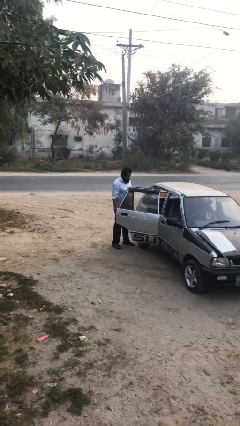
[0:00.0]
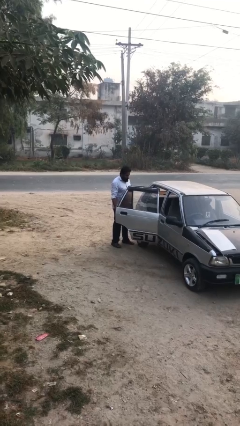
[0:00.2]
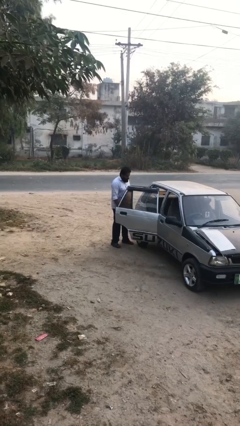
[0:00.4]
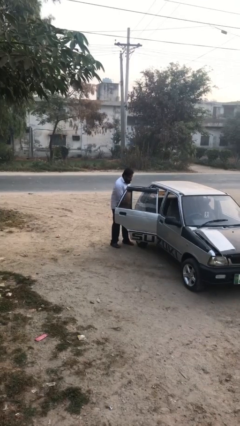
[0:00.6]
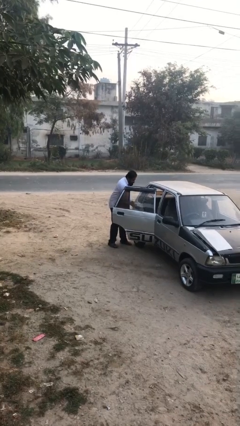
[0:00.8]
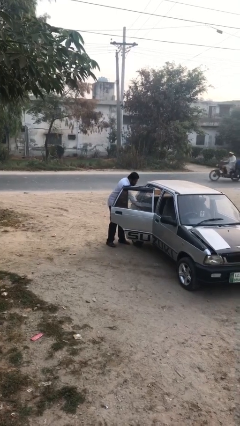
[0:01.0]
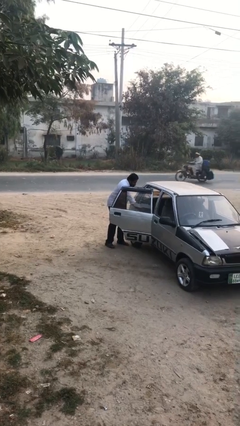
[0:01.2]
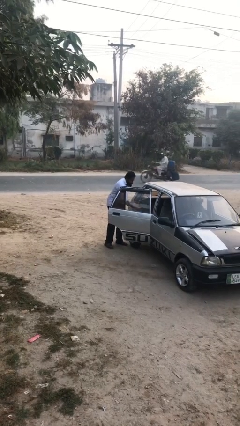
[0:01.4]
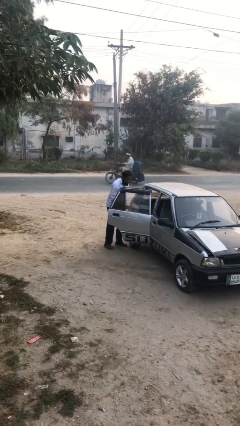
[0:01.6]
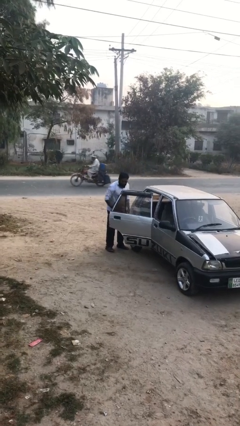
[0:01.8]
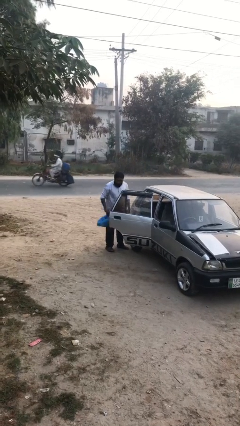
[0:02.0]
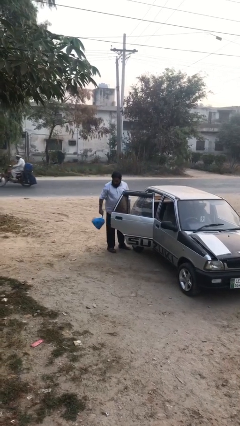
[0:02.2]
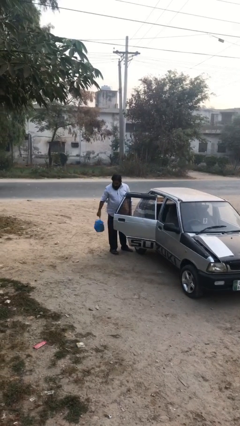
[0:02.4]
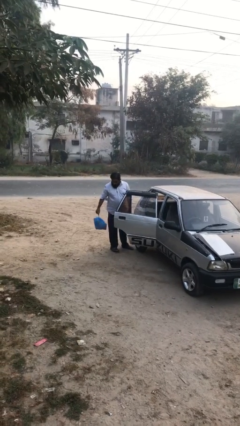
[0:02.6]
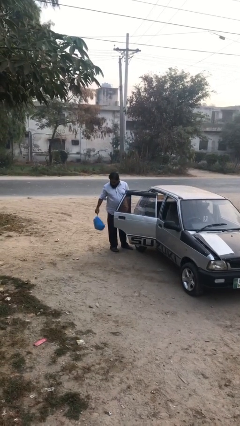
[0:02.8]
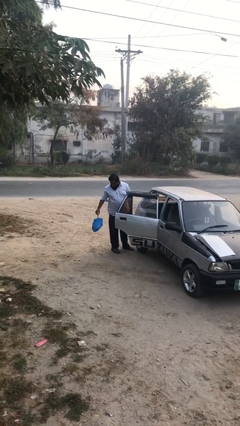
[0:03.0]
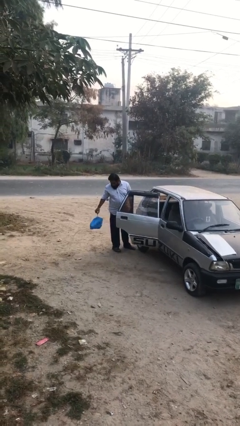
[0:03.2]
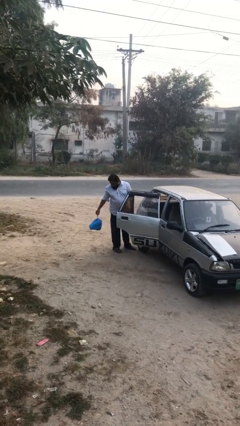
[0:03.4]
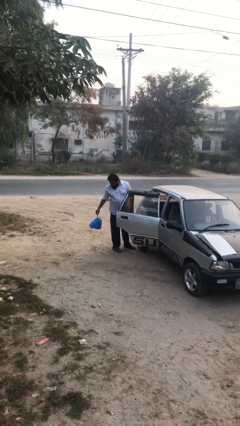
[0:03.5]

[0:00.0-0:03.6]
person unloads car

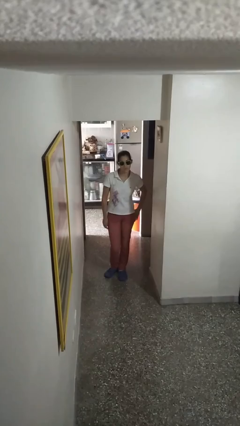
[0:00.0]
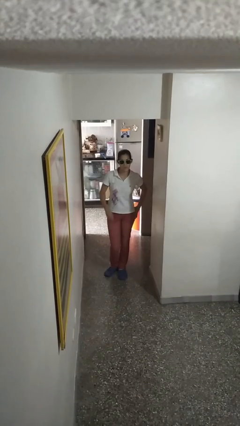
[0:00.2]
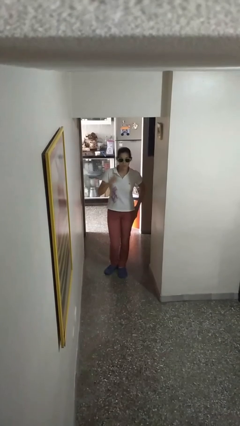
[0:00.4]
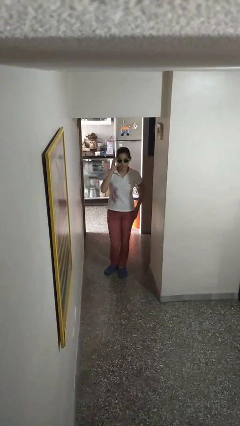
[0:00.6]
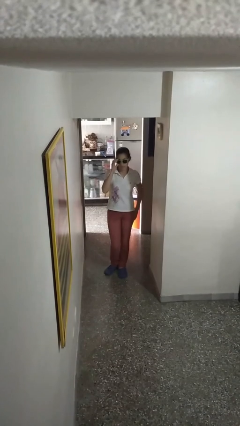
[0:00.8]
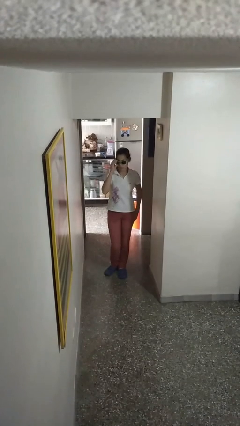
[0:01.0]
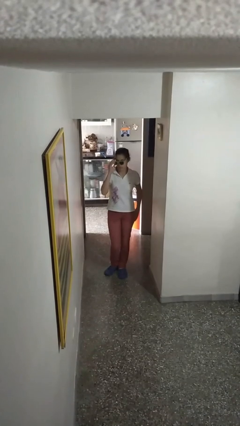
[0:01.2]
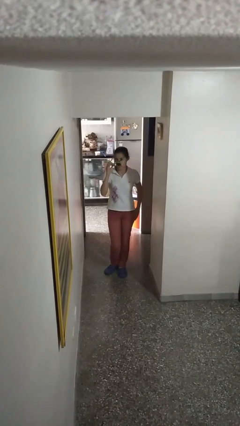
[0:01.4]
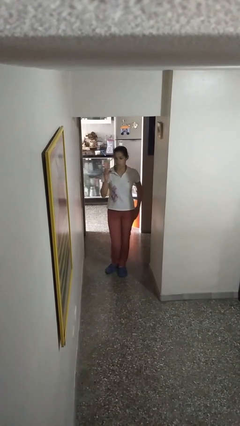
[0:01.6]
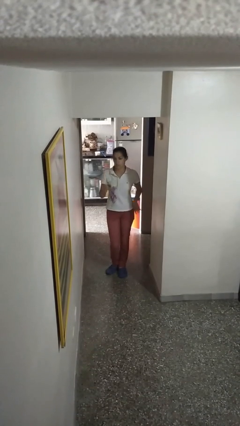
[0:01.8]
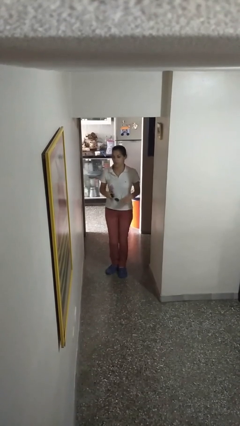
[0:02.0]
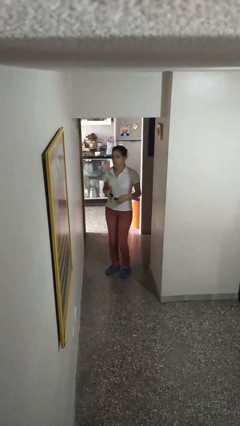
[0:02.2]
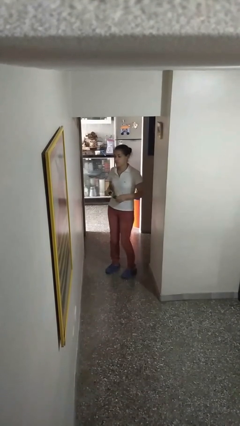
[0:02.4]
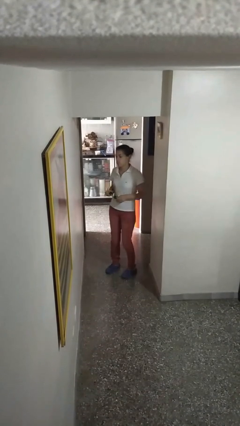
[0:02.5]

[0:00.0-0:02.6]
person takes off sunglasses

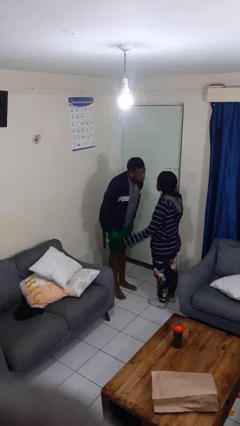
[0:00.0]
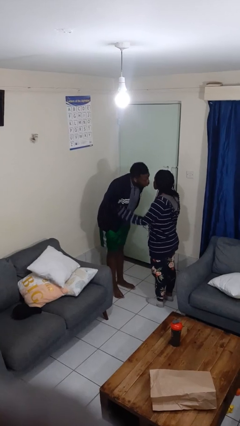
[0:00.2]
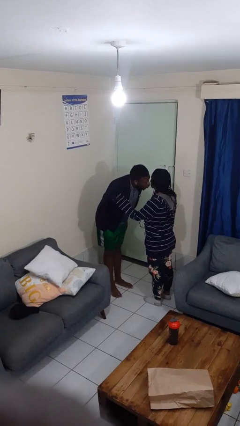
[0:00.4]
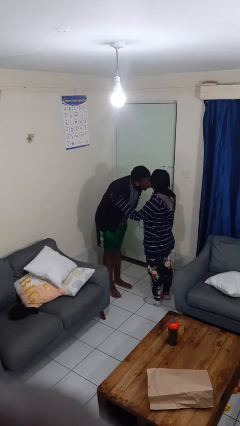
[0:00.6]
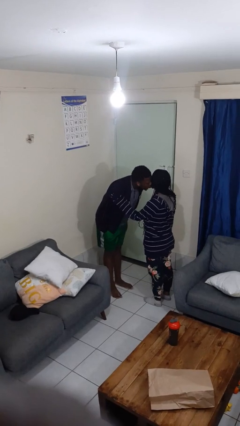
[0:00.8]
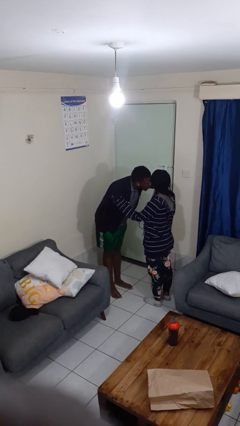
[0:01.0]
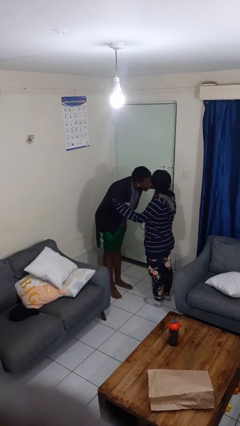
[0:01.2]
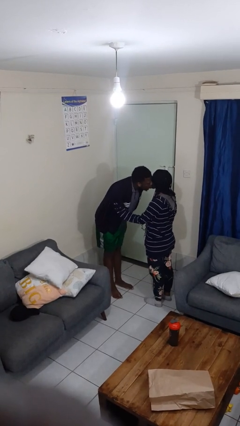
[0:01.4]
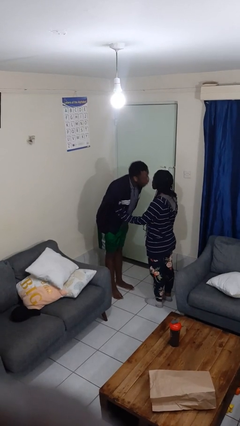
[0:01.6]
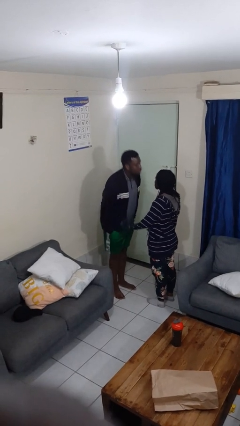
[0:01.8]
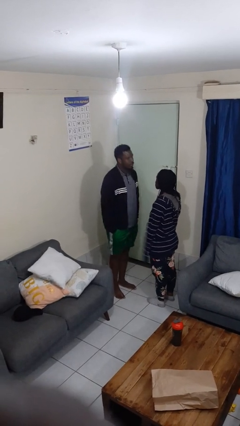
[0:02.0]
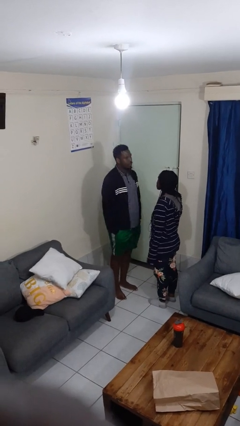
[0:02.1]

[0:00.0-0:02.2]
person kisses cheek of person

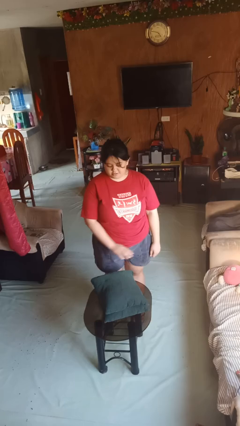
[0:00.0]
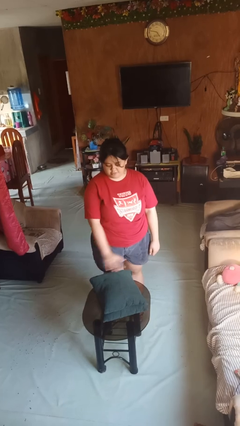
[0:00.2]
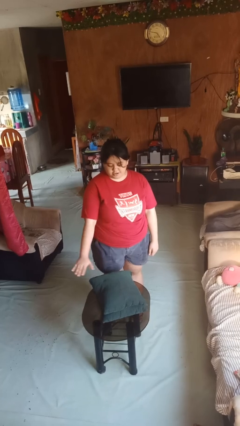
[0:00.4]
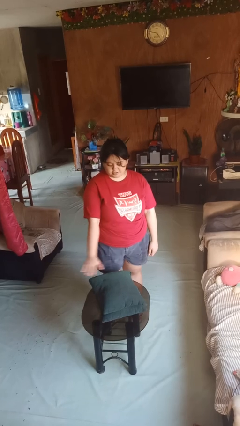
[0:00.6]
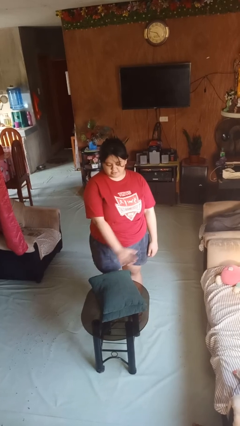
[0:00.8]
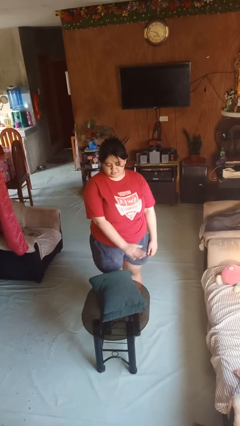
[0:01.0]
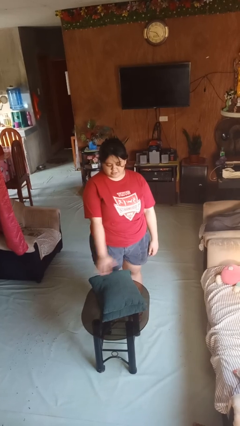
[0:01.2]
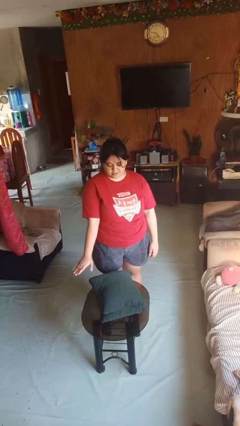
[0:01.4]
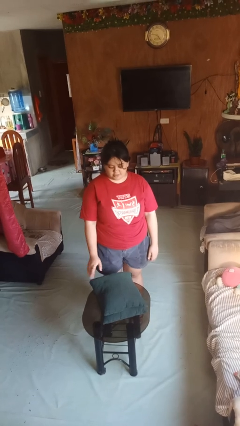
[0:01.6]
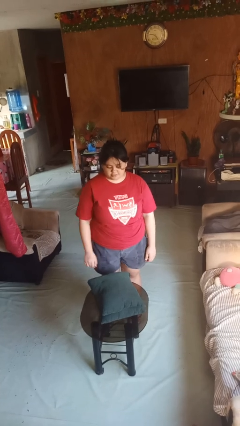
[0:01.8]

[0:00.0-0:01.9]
person waves hand over object

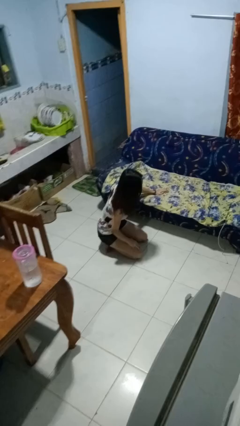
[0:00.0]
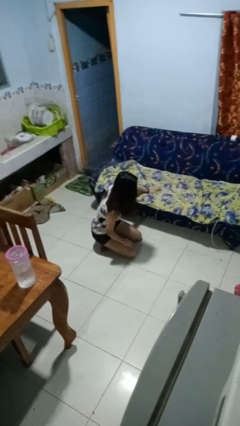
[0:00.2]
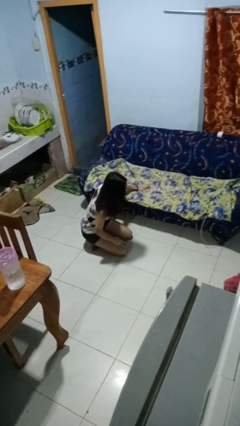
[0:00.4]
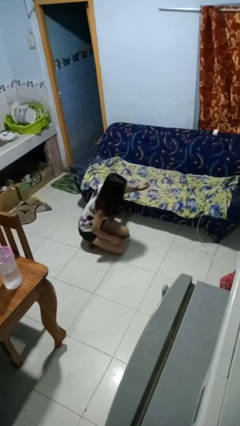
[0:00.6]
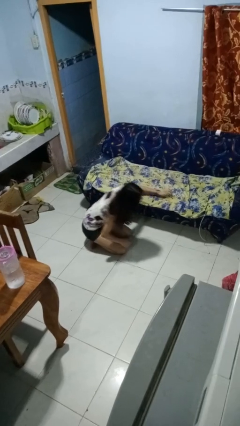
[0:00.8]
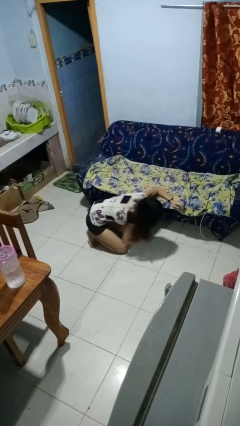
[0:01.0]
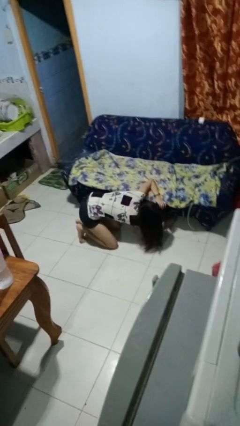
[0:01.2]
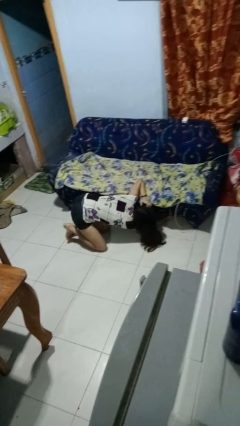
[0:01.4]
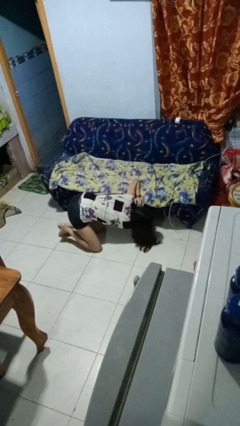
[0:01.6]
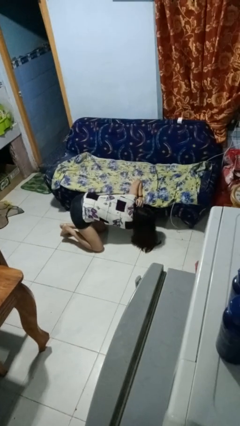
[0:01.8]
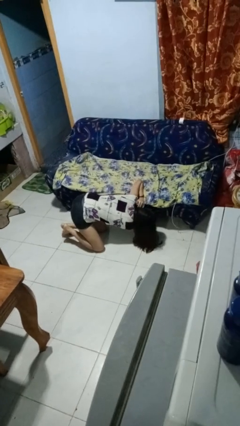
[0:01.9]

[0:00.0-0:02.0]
person searches under couch

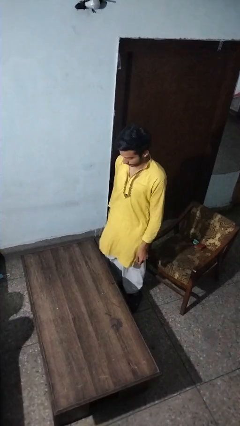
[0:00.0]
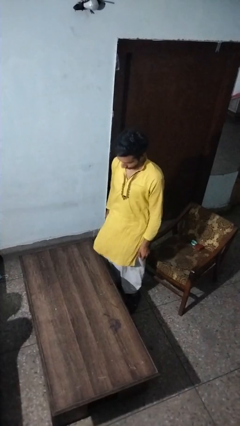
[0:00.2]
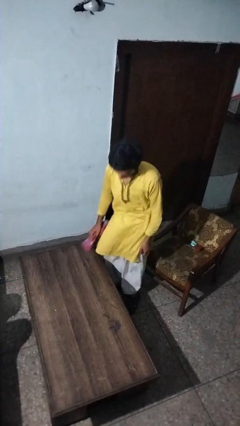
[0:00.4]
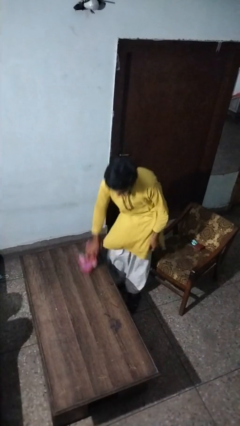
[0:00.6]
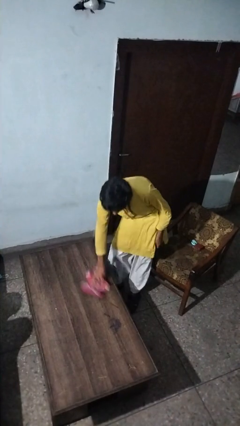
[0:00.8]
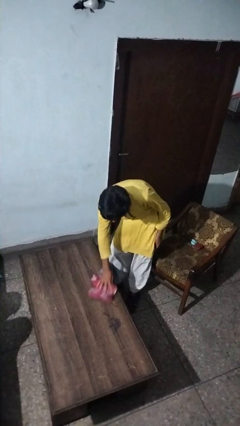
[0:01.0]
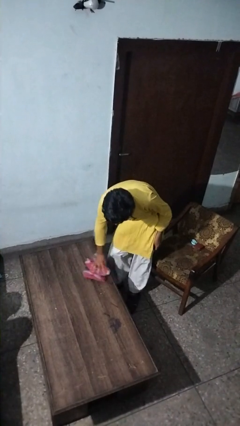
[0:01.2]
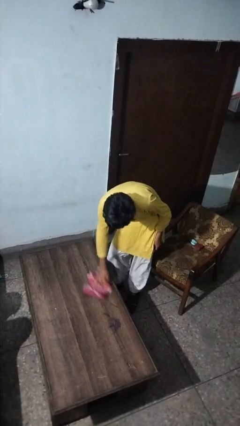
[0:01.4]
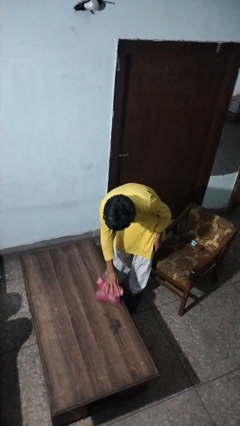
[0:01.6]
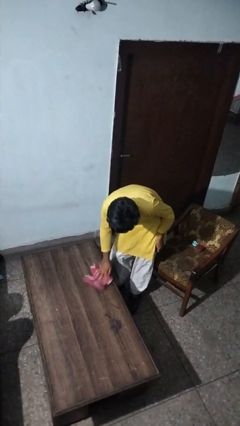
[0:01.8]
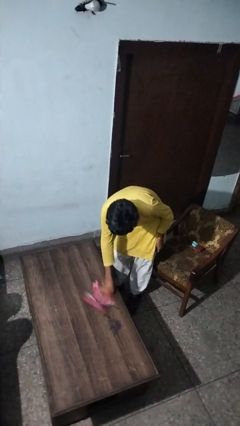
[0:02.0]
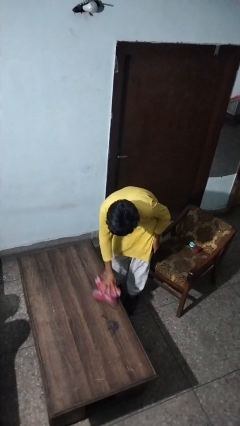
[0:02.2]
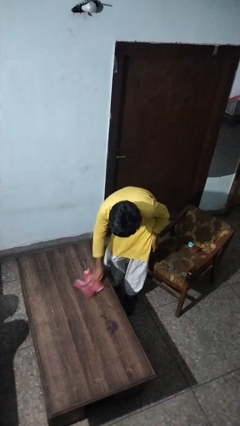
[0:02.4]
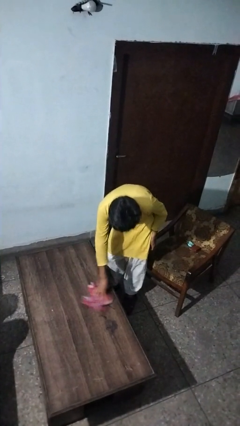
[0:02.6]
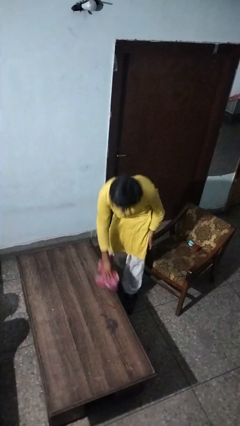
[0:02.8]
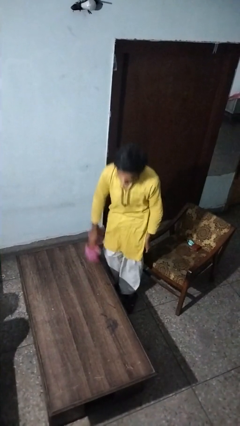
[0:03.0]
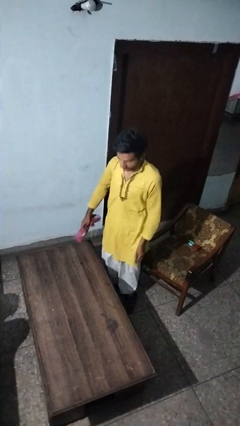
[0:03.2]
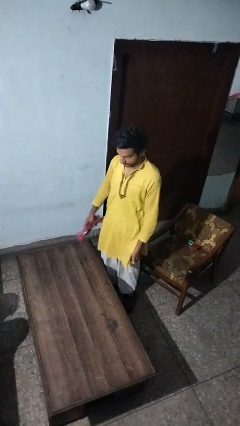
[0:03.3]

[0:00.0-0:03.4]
person cleans table with rag

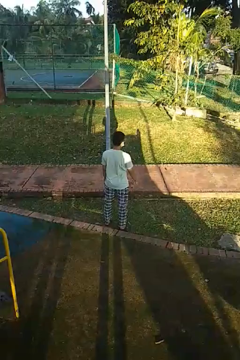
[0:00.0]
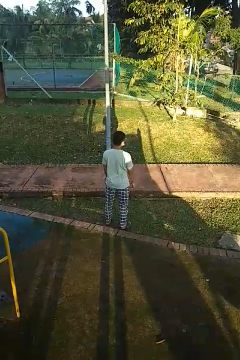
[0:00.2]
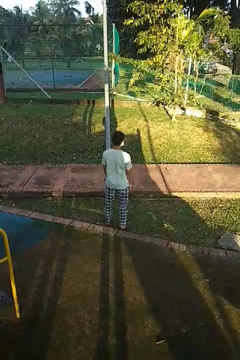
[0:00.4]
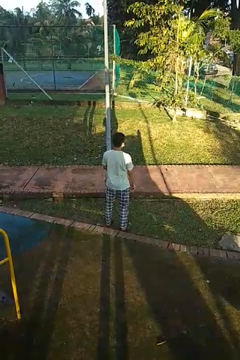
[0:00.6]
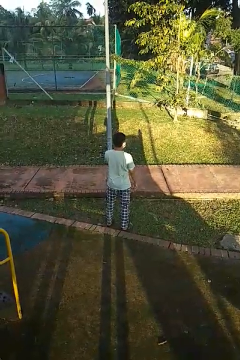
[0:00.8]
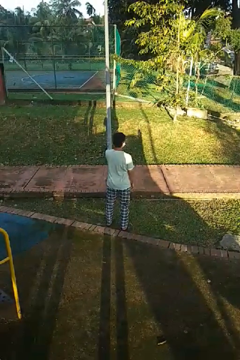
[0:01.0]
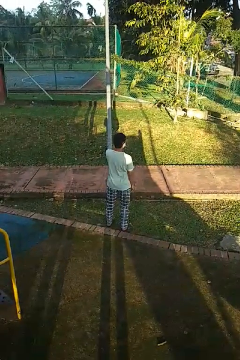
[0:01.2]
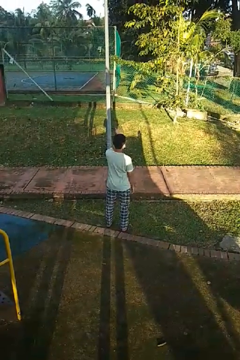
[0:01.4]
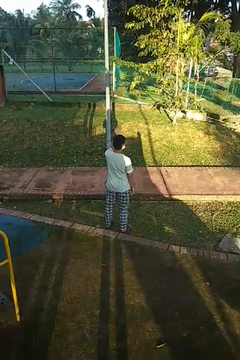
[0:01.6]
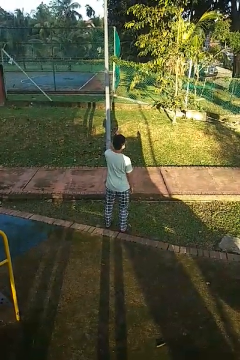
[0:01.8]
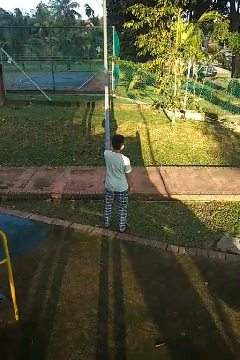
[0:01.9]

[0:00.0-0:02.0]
person gestures blow kiss
